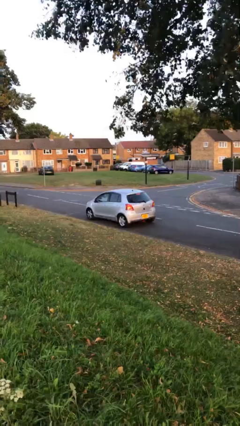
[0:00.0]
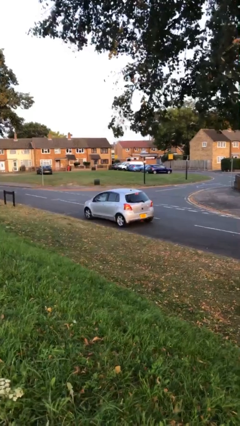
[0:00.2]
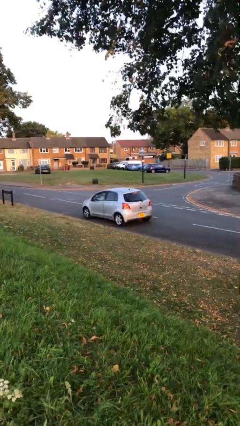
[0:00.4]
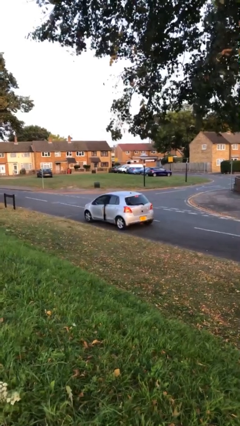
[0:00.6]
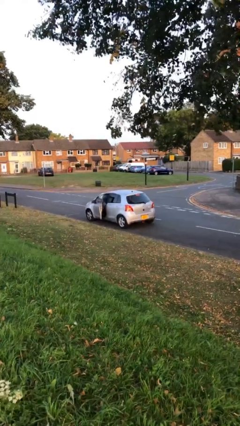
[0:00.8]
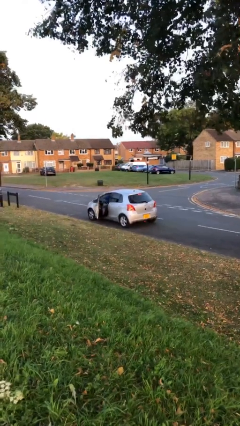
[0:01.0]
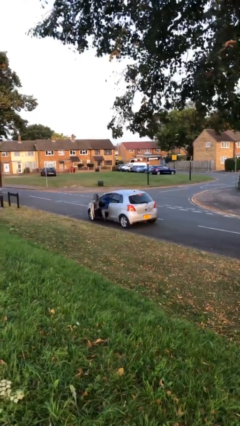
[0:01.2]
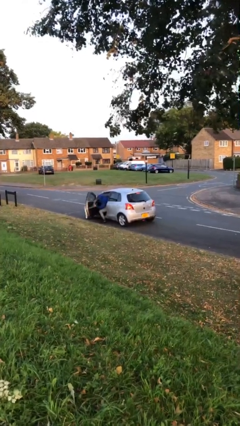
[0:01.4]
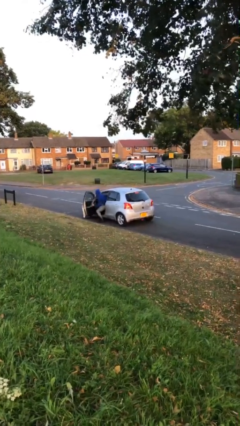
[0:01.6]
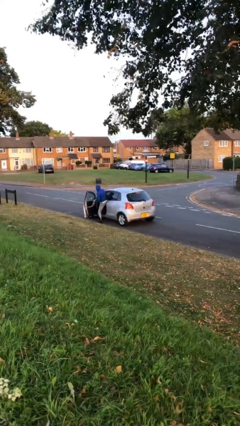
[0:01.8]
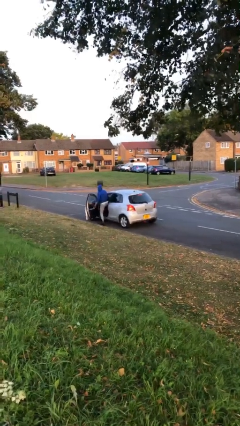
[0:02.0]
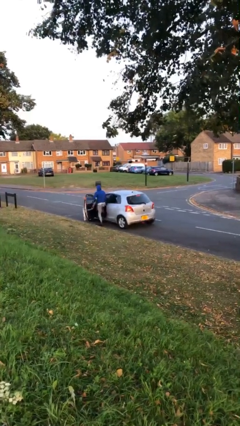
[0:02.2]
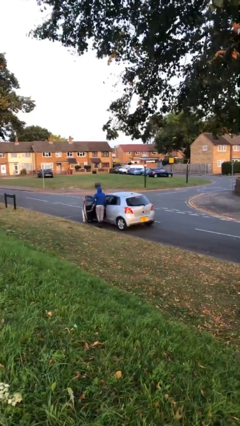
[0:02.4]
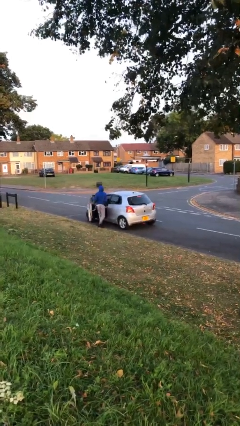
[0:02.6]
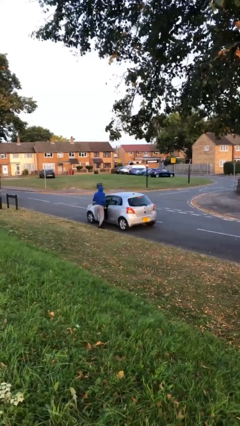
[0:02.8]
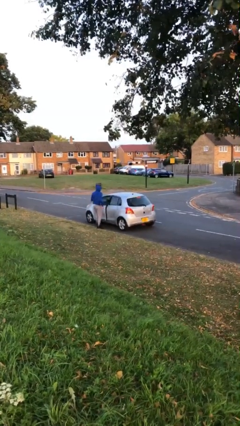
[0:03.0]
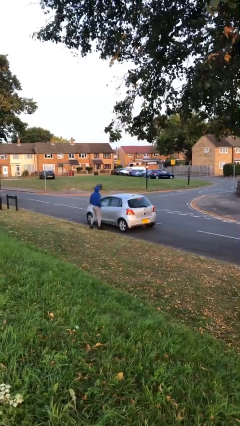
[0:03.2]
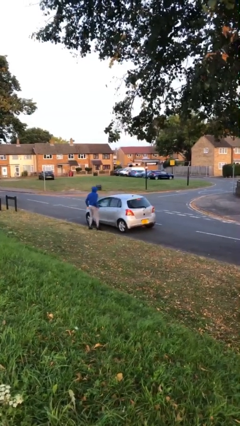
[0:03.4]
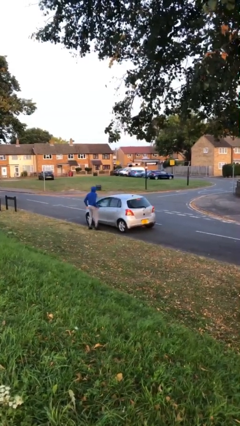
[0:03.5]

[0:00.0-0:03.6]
car drops off person

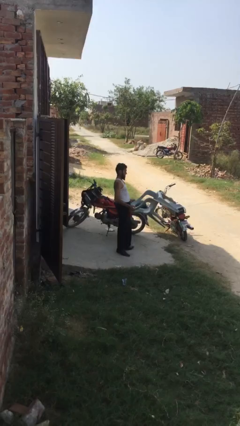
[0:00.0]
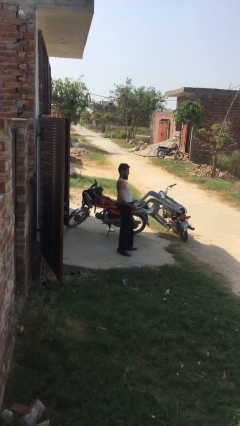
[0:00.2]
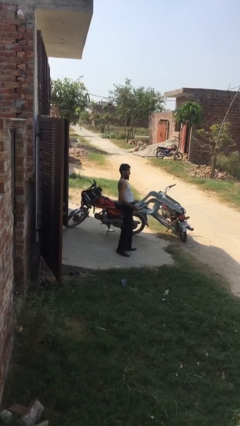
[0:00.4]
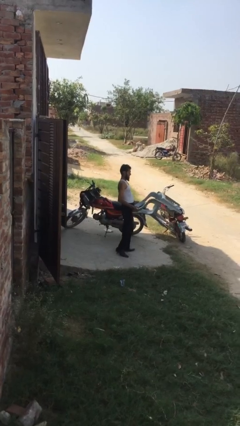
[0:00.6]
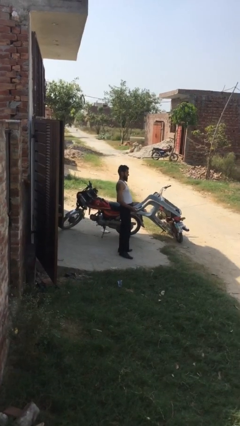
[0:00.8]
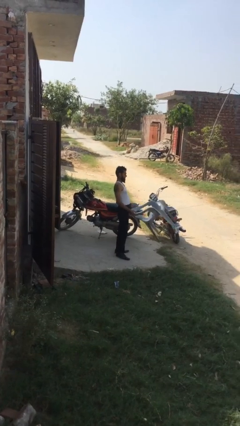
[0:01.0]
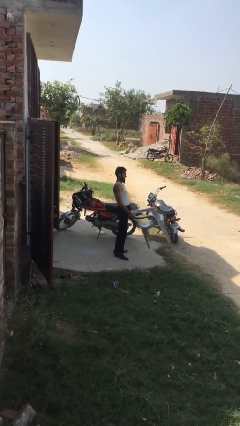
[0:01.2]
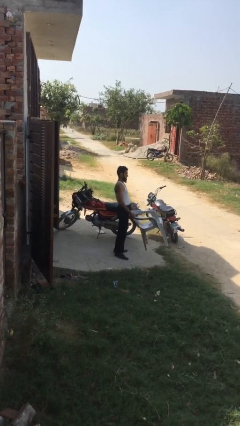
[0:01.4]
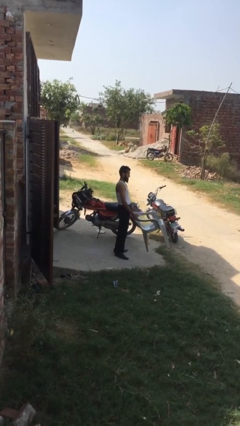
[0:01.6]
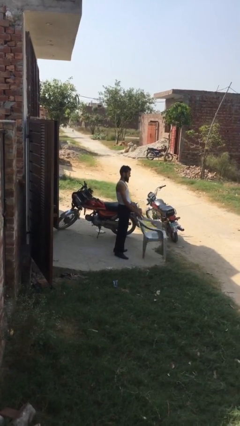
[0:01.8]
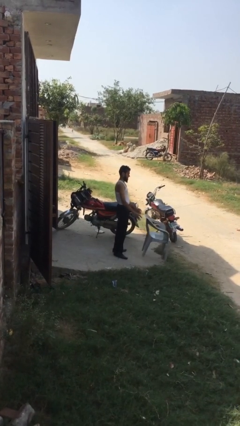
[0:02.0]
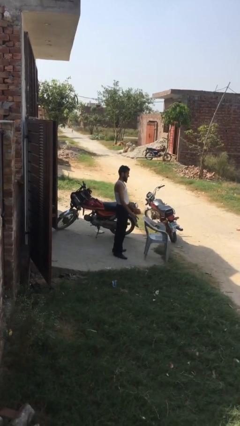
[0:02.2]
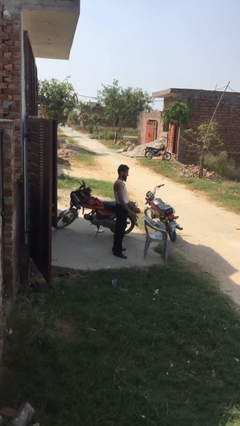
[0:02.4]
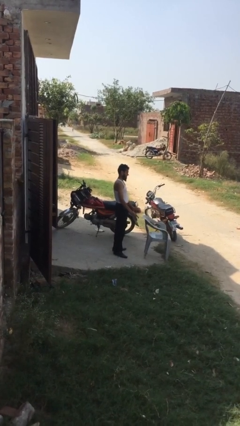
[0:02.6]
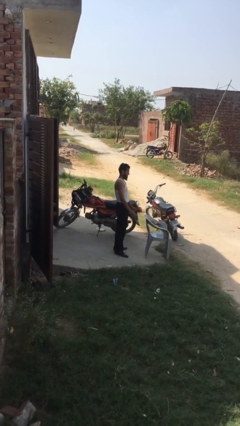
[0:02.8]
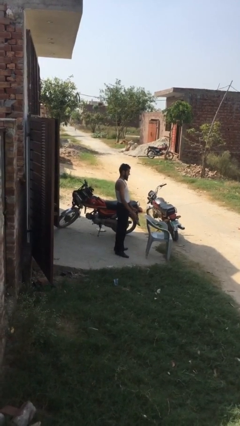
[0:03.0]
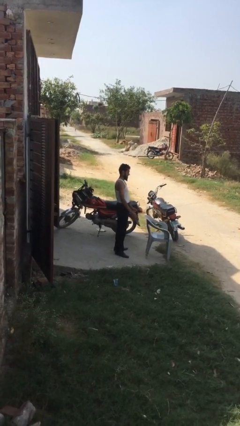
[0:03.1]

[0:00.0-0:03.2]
person puts down object on floor

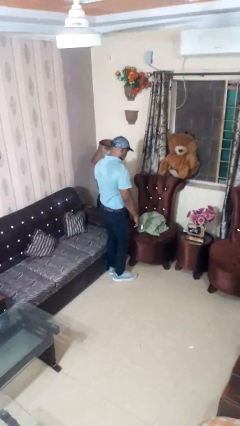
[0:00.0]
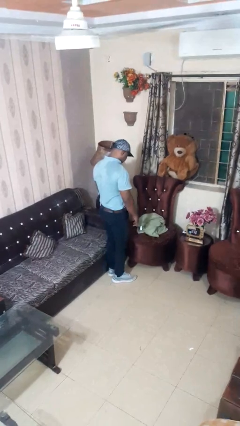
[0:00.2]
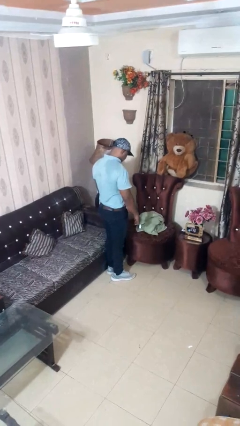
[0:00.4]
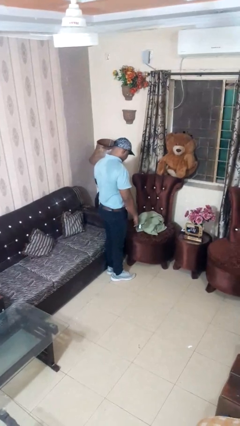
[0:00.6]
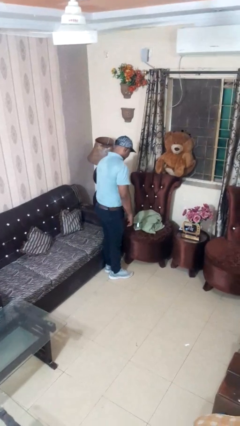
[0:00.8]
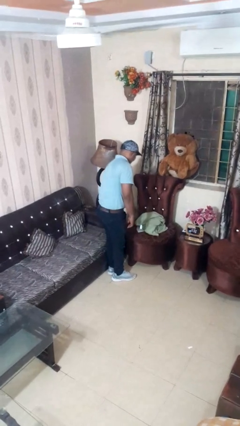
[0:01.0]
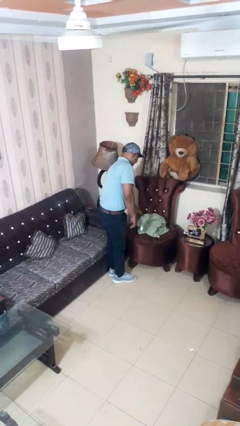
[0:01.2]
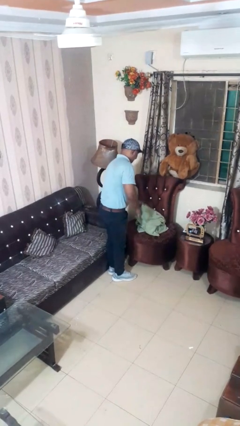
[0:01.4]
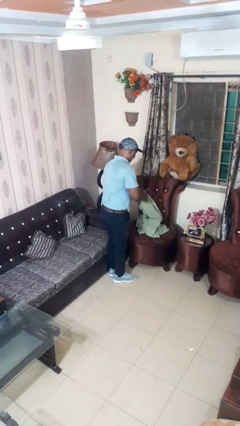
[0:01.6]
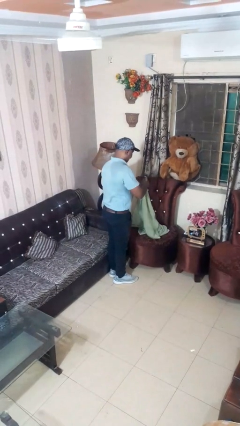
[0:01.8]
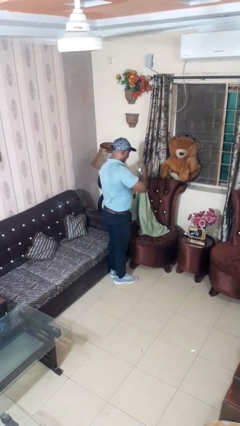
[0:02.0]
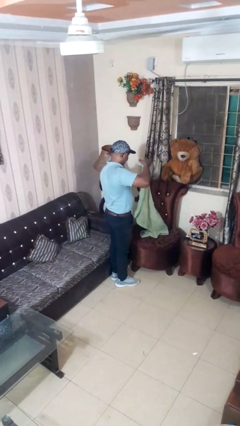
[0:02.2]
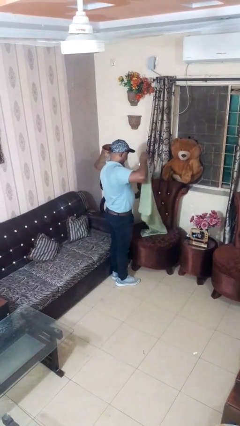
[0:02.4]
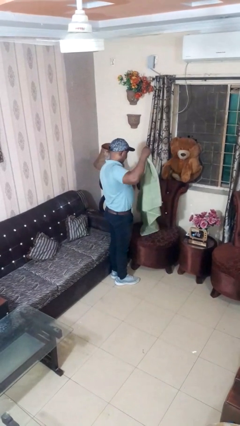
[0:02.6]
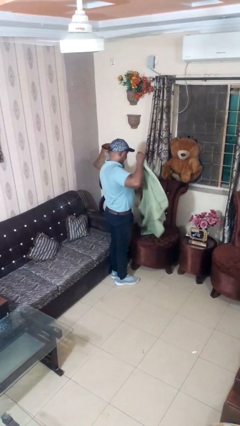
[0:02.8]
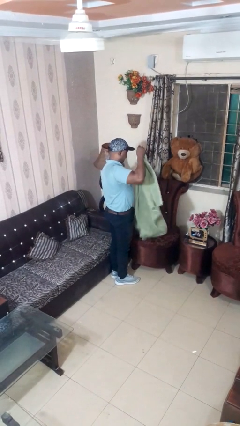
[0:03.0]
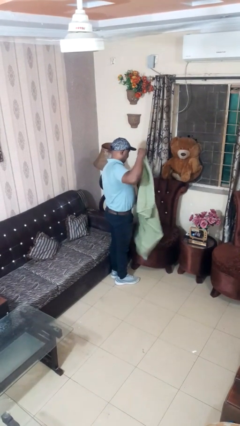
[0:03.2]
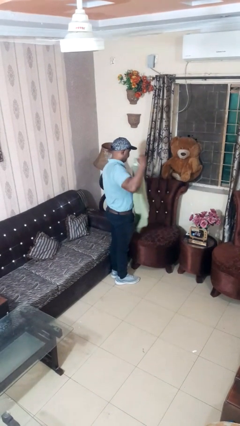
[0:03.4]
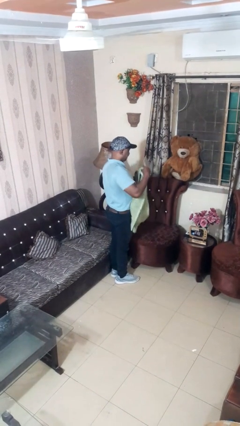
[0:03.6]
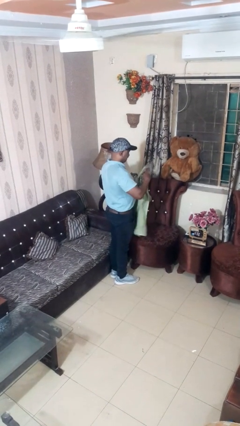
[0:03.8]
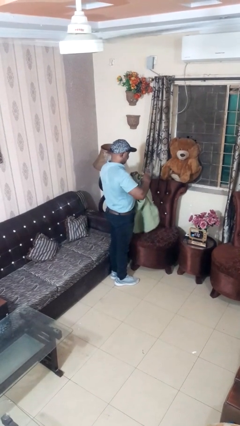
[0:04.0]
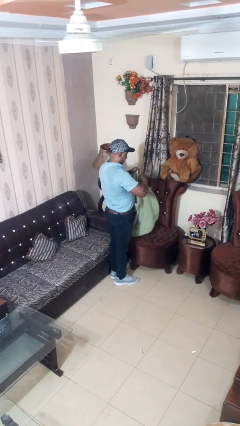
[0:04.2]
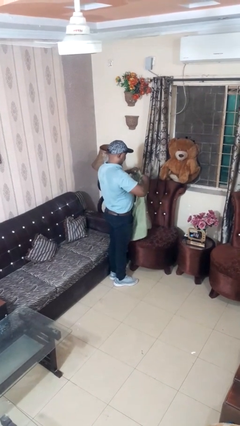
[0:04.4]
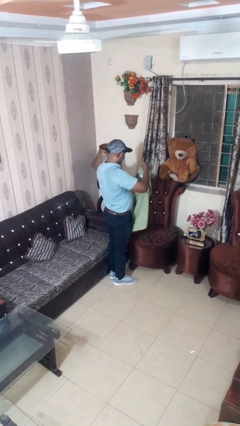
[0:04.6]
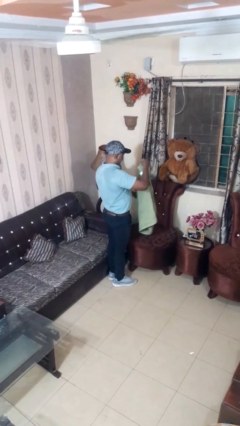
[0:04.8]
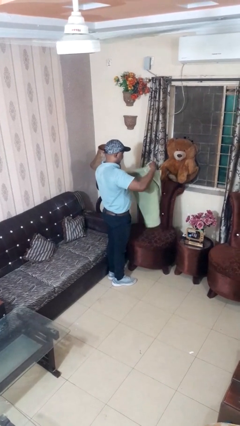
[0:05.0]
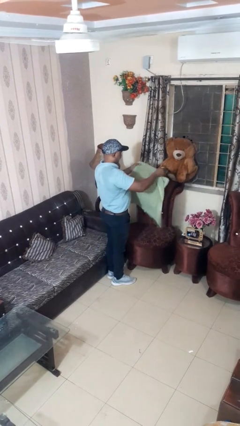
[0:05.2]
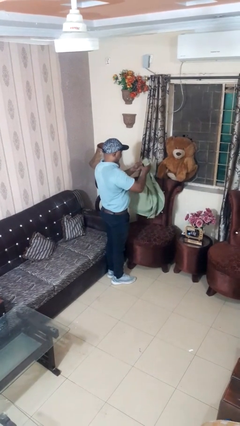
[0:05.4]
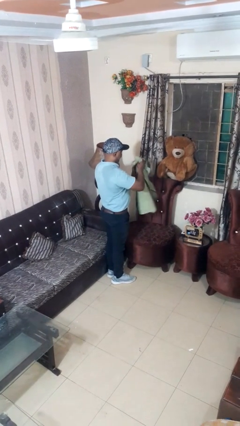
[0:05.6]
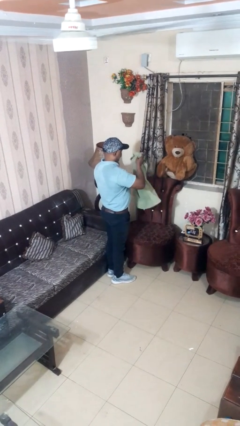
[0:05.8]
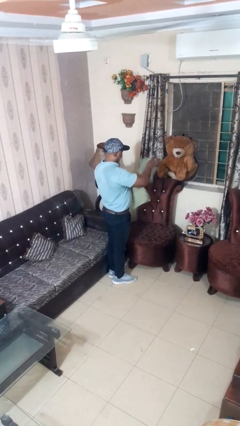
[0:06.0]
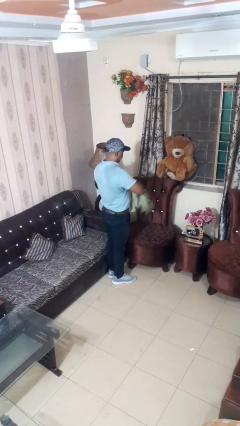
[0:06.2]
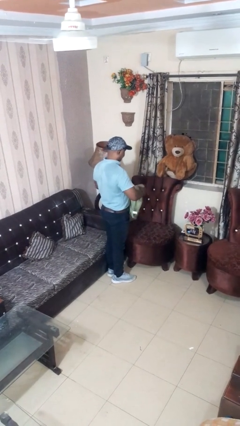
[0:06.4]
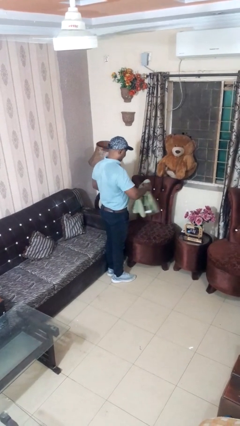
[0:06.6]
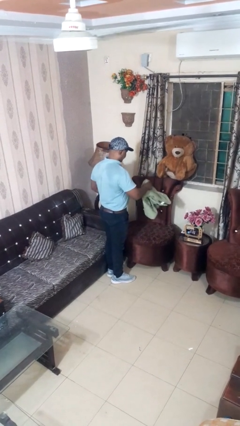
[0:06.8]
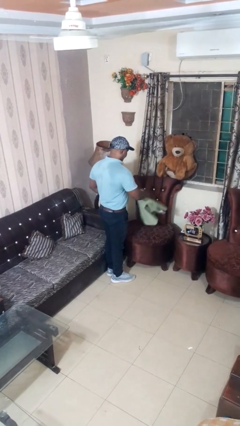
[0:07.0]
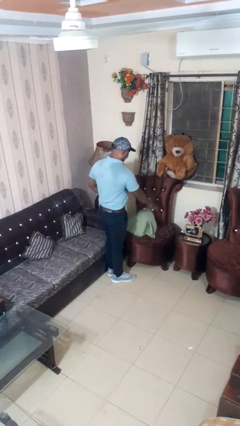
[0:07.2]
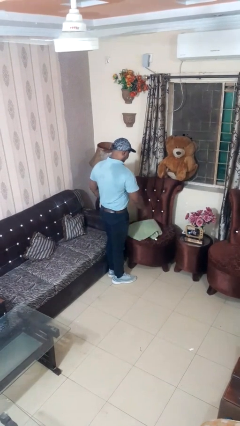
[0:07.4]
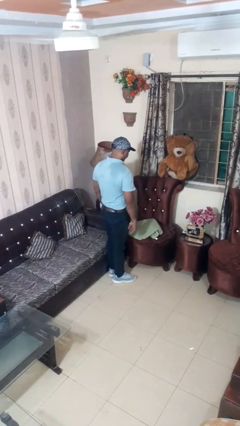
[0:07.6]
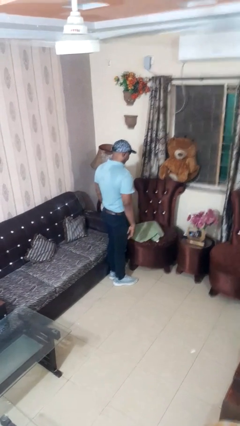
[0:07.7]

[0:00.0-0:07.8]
person folds towel

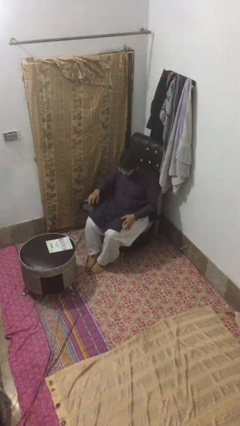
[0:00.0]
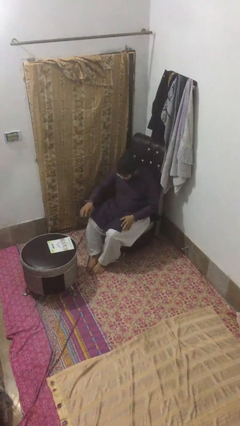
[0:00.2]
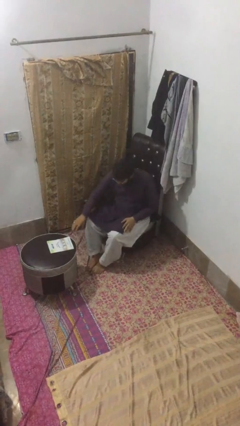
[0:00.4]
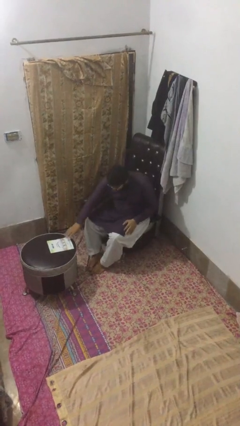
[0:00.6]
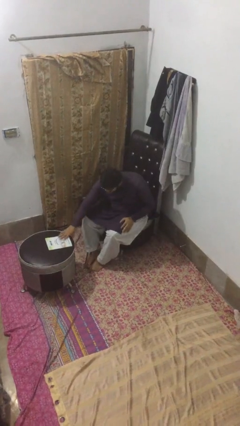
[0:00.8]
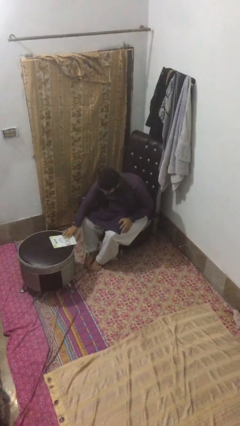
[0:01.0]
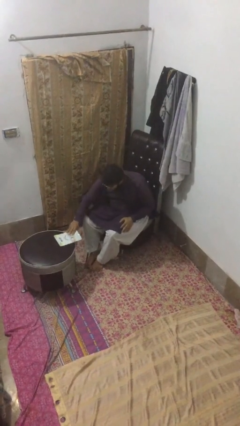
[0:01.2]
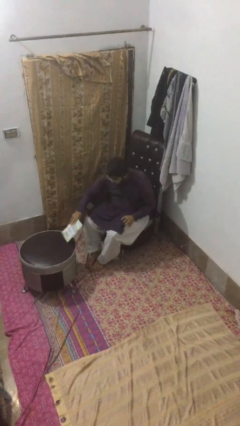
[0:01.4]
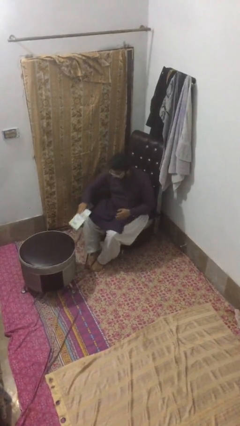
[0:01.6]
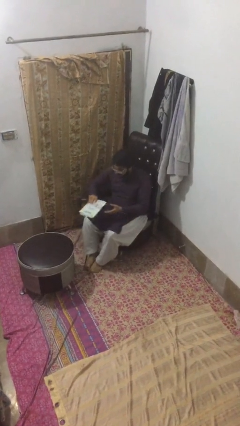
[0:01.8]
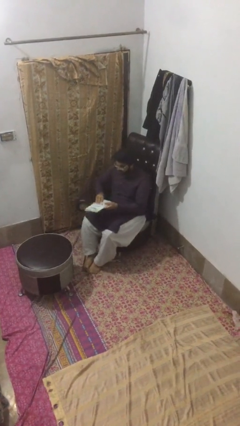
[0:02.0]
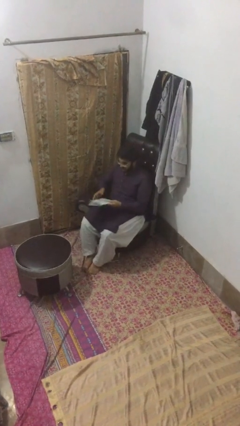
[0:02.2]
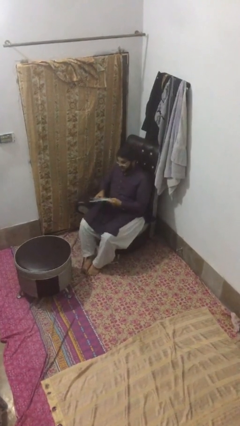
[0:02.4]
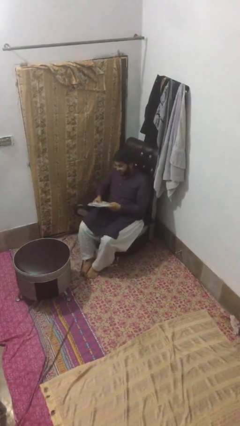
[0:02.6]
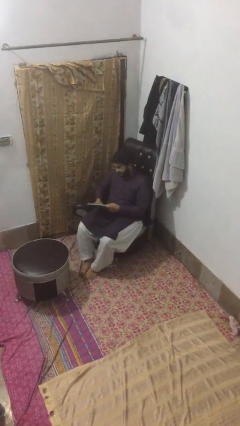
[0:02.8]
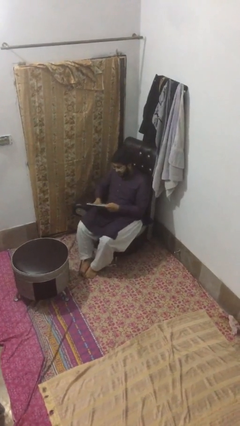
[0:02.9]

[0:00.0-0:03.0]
person picks up object from table
